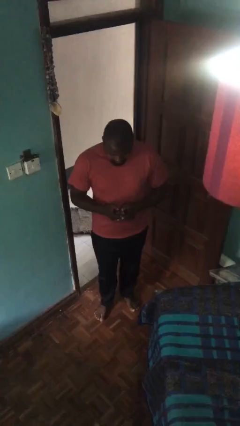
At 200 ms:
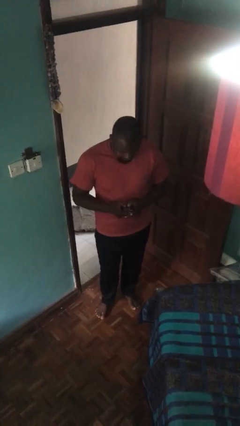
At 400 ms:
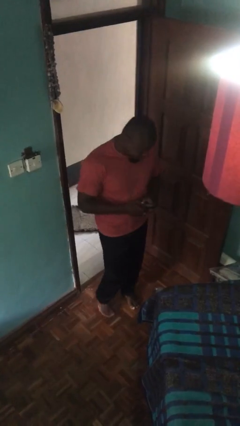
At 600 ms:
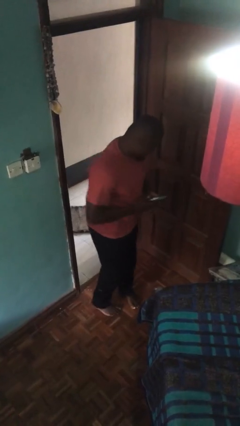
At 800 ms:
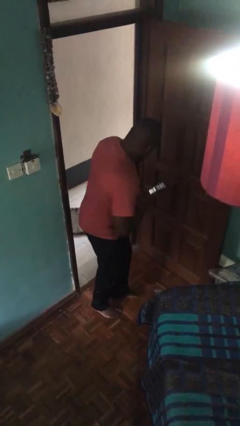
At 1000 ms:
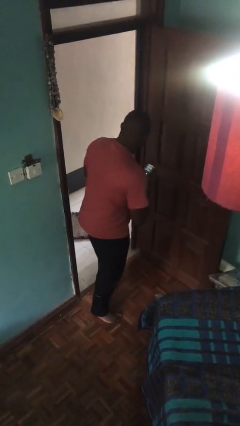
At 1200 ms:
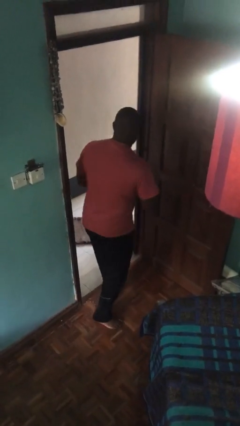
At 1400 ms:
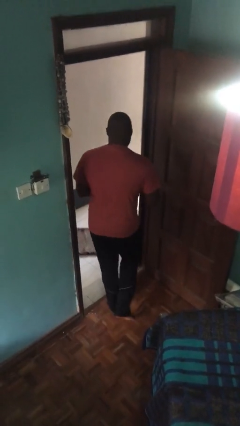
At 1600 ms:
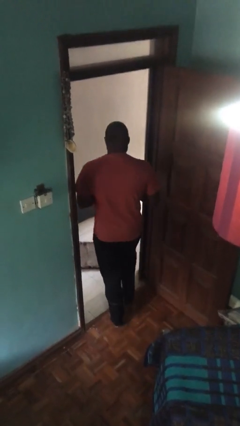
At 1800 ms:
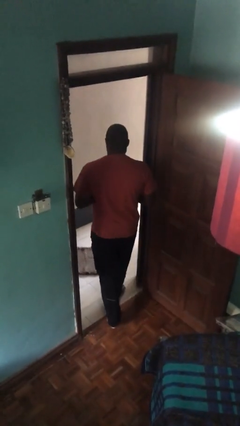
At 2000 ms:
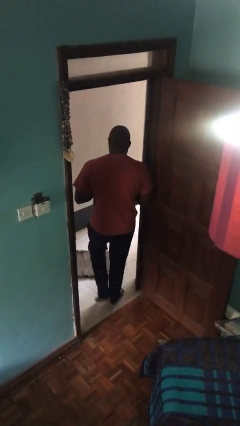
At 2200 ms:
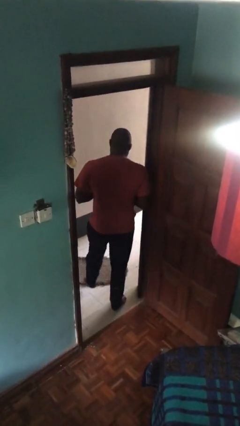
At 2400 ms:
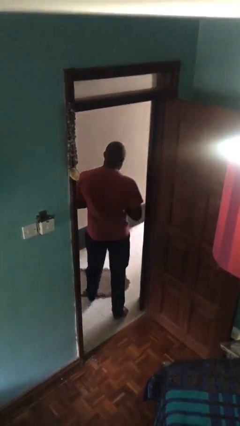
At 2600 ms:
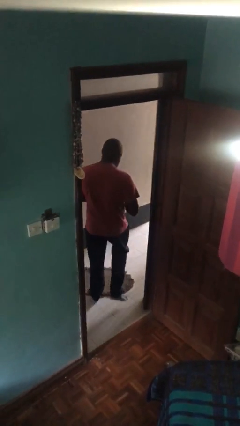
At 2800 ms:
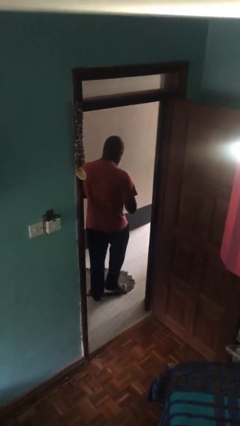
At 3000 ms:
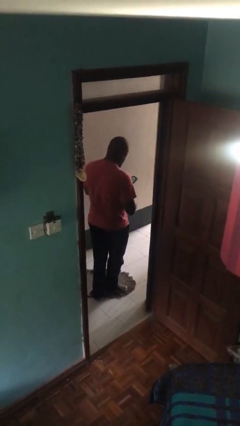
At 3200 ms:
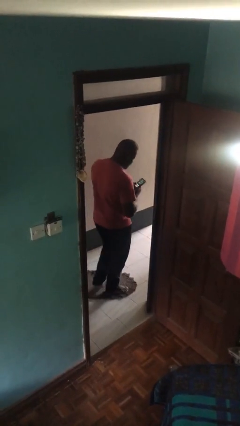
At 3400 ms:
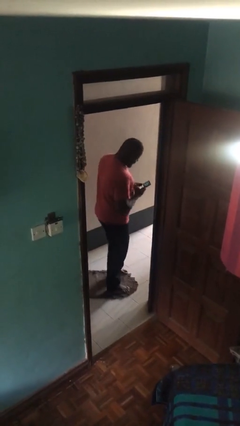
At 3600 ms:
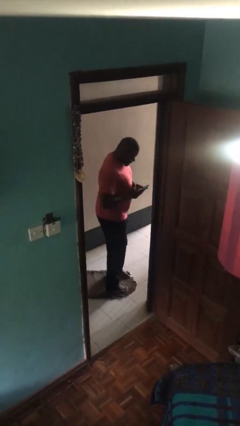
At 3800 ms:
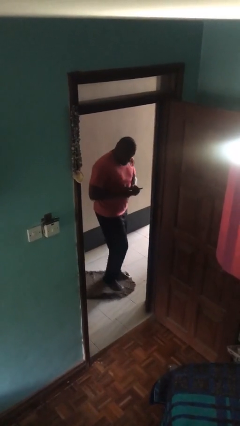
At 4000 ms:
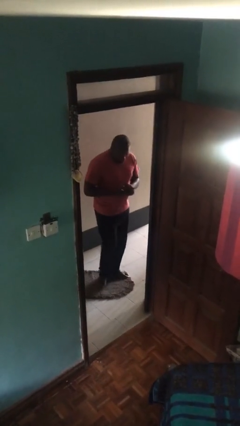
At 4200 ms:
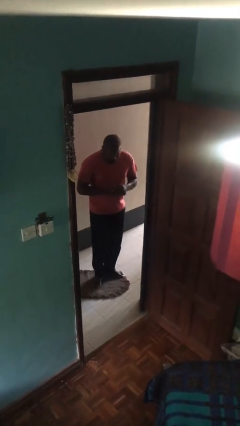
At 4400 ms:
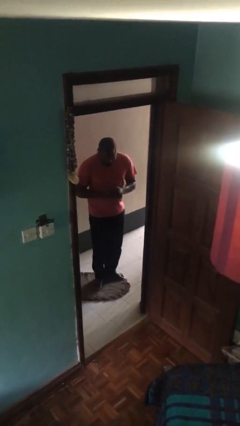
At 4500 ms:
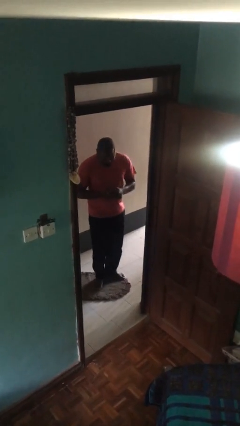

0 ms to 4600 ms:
person exits scene through structure

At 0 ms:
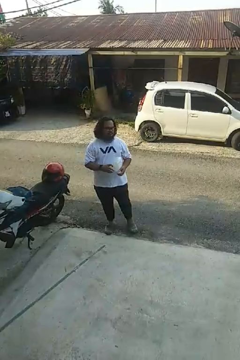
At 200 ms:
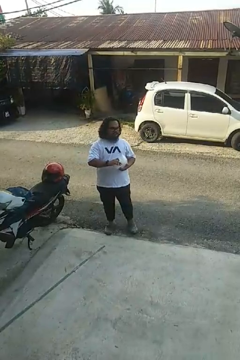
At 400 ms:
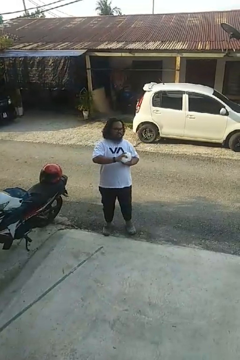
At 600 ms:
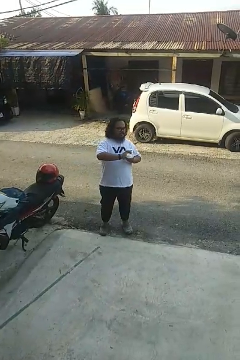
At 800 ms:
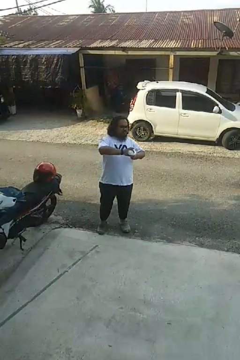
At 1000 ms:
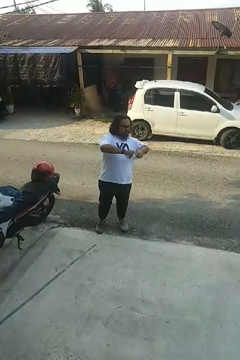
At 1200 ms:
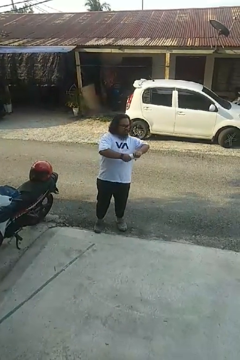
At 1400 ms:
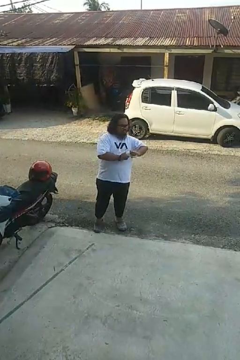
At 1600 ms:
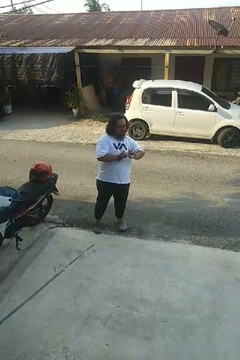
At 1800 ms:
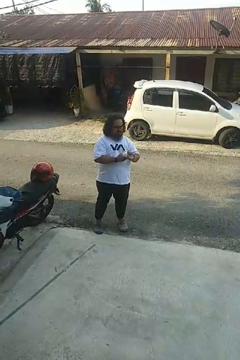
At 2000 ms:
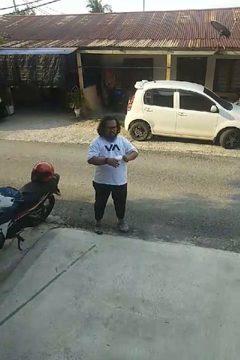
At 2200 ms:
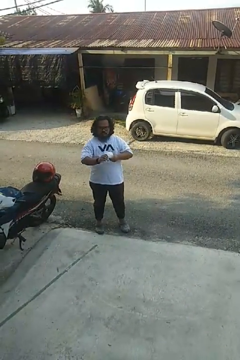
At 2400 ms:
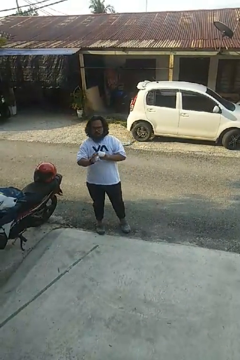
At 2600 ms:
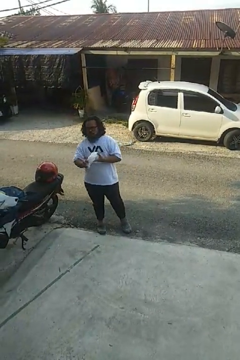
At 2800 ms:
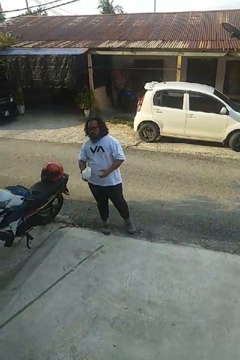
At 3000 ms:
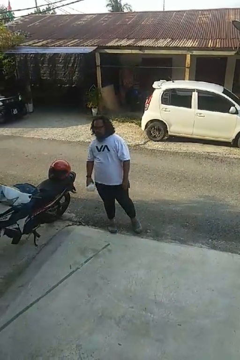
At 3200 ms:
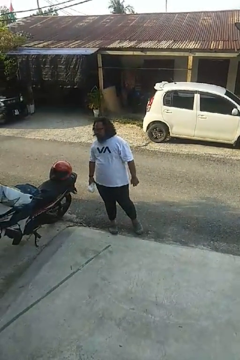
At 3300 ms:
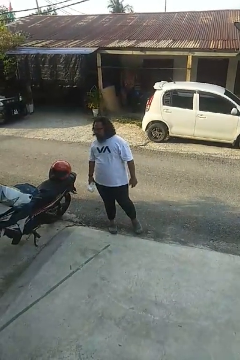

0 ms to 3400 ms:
person squeezes object

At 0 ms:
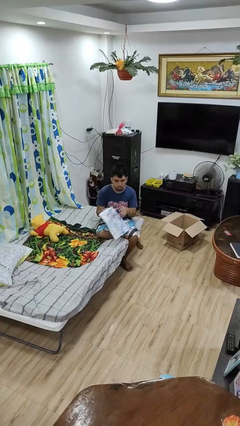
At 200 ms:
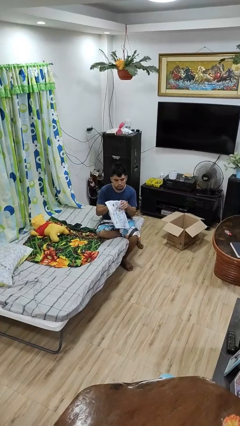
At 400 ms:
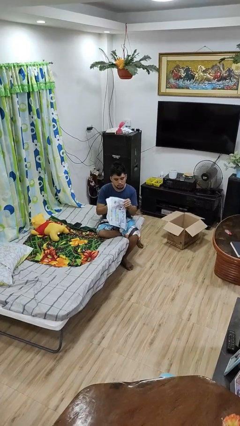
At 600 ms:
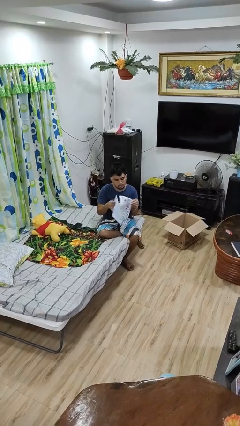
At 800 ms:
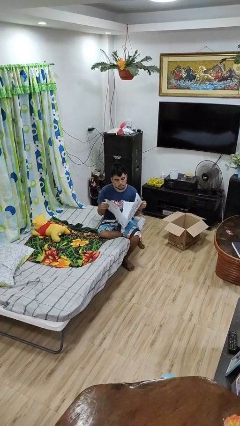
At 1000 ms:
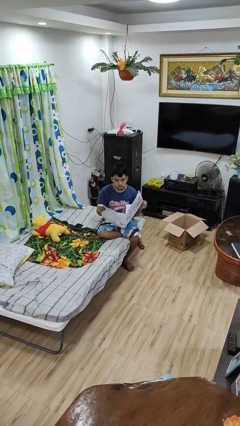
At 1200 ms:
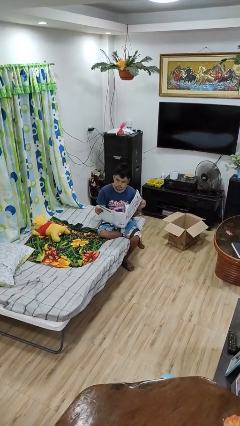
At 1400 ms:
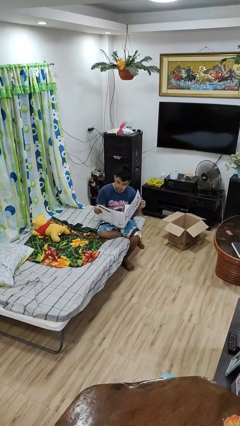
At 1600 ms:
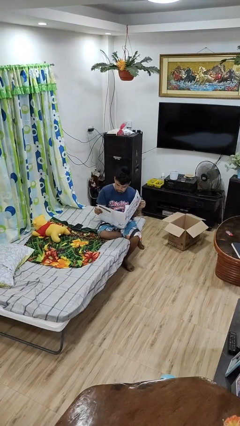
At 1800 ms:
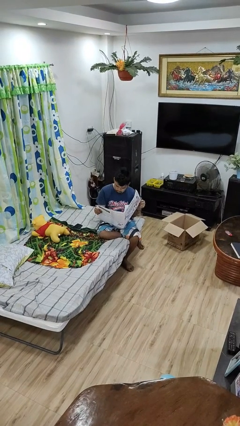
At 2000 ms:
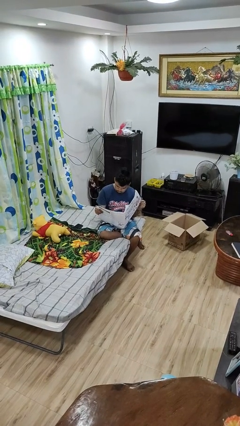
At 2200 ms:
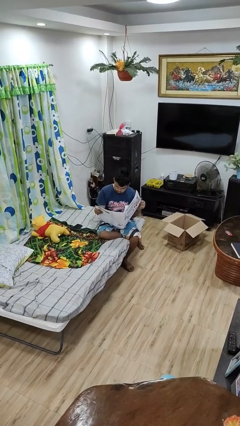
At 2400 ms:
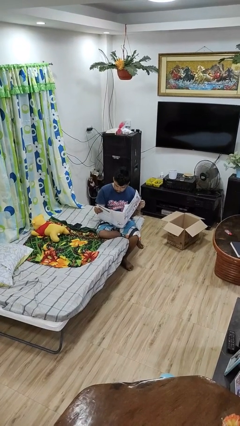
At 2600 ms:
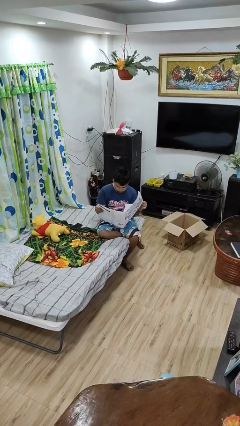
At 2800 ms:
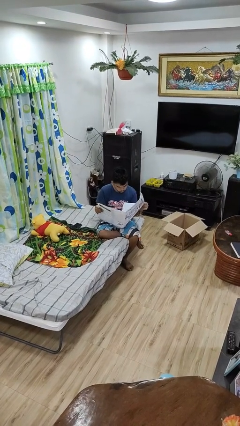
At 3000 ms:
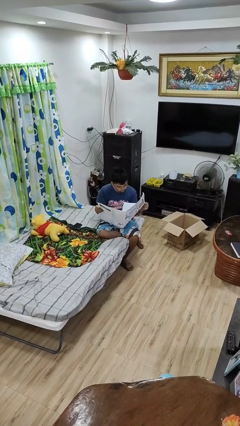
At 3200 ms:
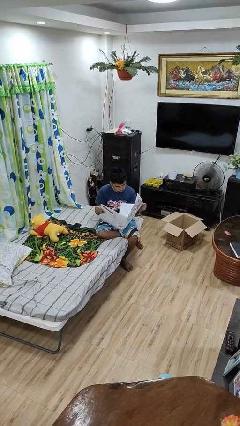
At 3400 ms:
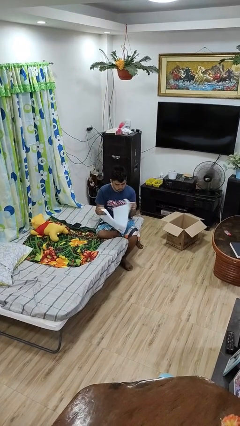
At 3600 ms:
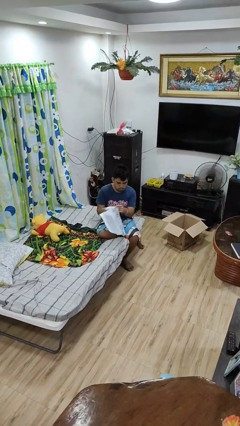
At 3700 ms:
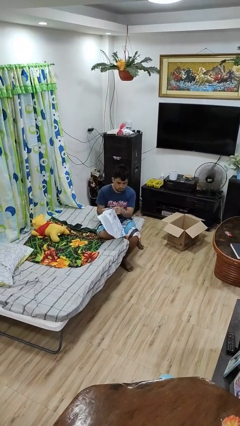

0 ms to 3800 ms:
person reads newspaper

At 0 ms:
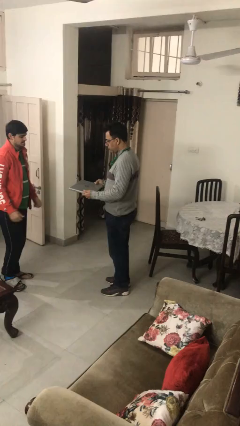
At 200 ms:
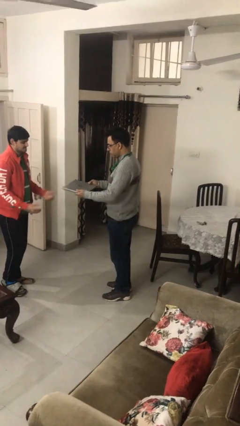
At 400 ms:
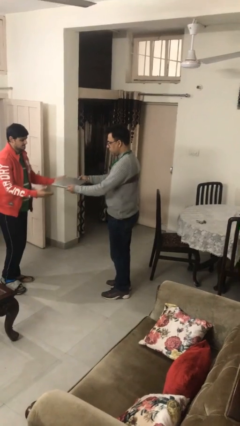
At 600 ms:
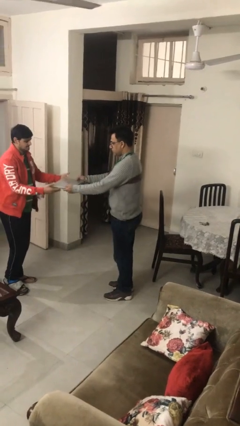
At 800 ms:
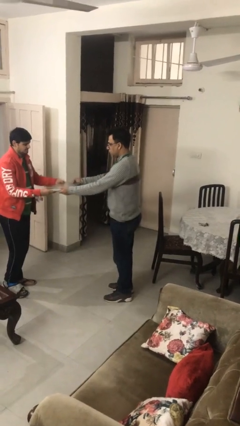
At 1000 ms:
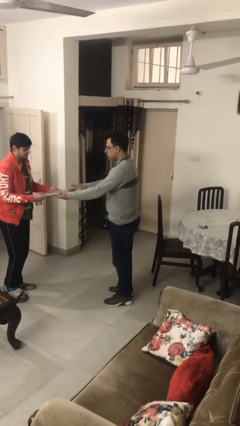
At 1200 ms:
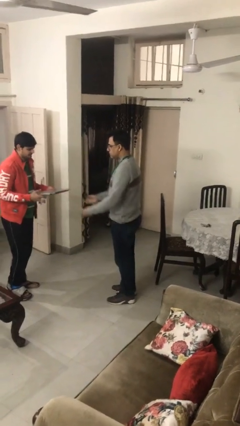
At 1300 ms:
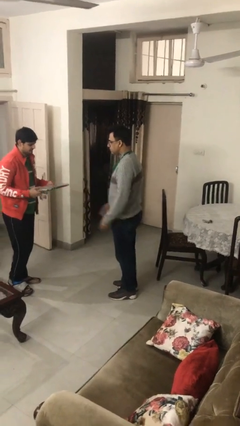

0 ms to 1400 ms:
person transfers object to person

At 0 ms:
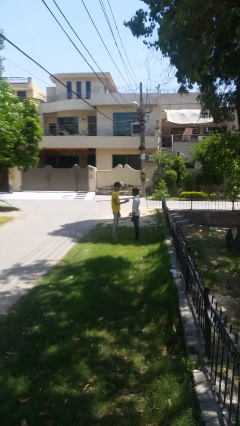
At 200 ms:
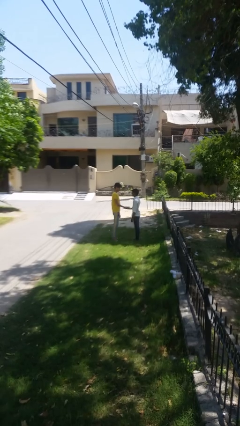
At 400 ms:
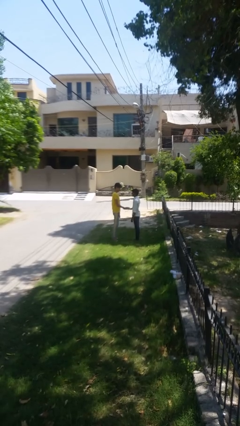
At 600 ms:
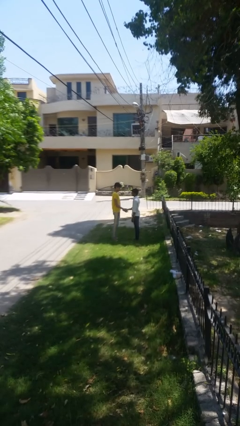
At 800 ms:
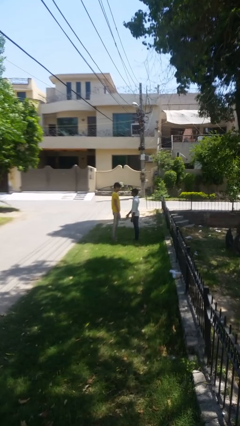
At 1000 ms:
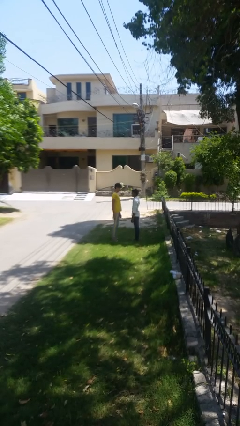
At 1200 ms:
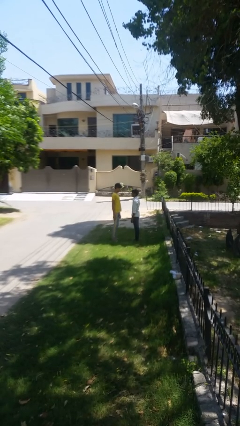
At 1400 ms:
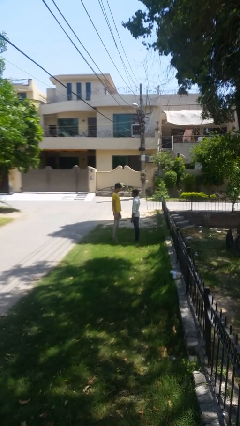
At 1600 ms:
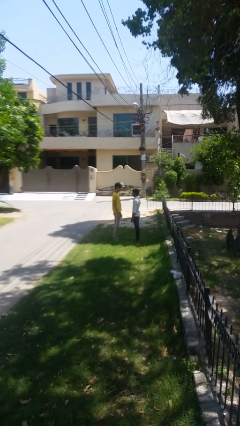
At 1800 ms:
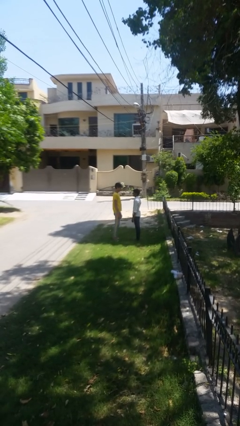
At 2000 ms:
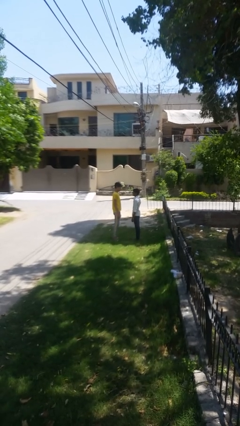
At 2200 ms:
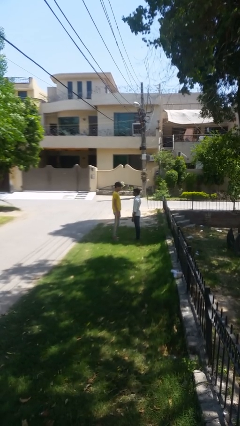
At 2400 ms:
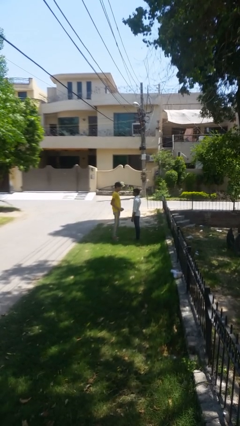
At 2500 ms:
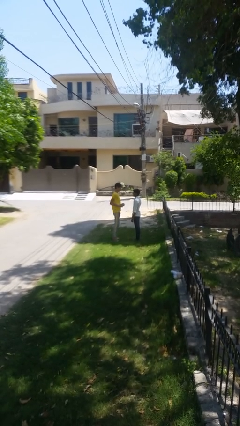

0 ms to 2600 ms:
person highfives hand

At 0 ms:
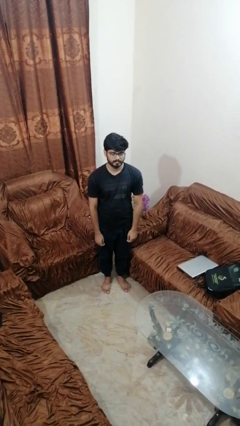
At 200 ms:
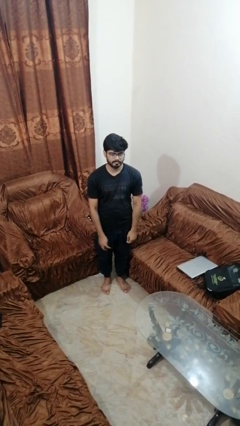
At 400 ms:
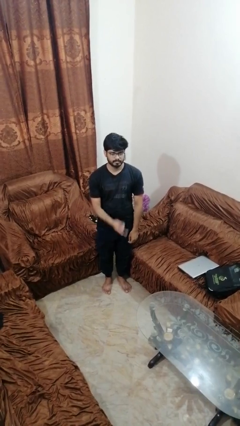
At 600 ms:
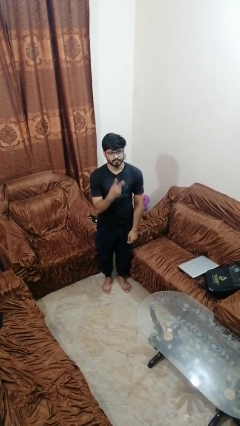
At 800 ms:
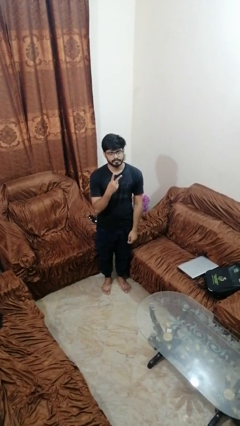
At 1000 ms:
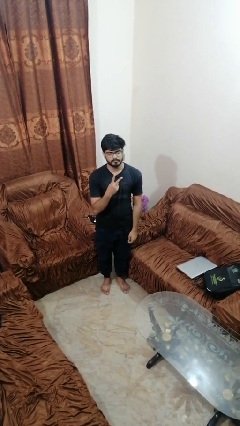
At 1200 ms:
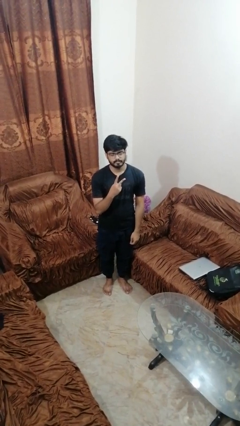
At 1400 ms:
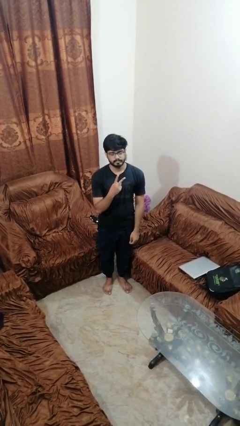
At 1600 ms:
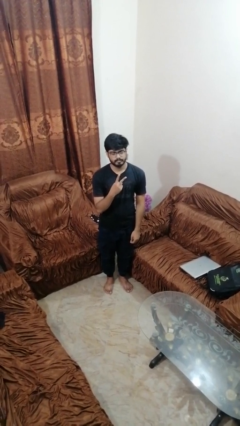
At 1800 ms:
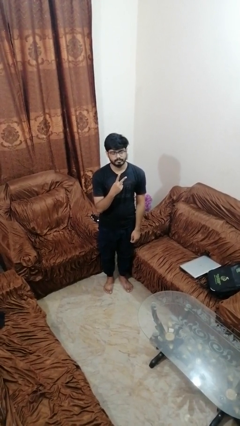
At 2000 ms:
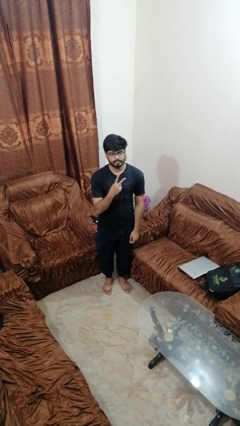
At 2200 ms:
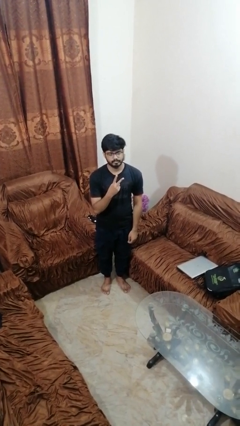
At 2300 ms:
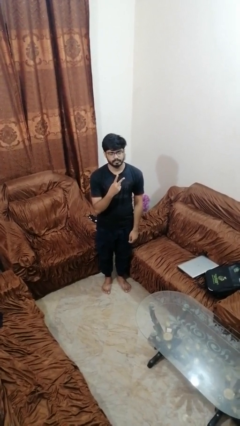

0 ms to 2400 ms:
person gestures peace
